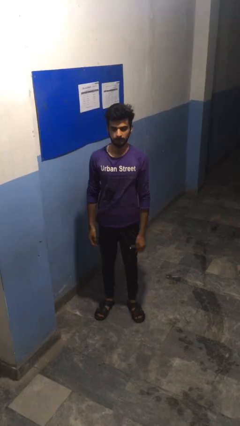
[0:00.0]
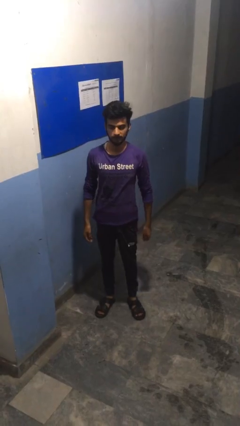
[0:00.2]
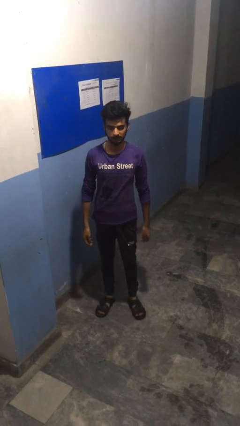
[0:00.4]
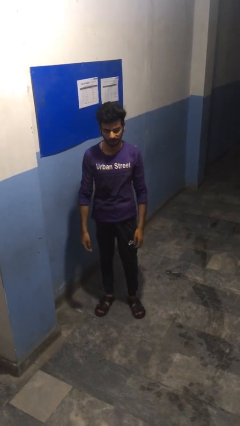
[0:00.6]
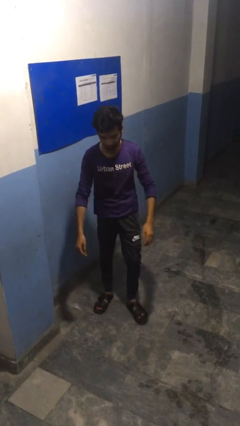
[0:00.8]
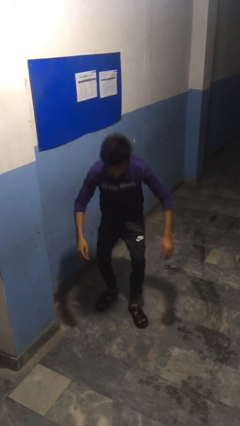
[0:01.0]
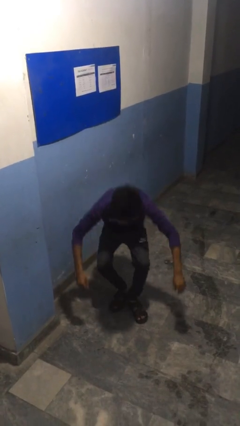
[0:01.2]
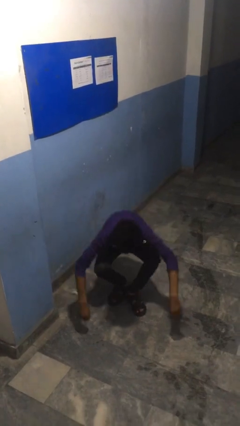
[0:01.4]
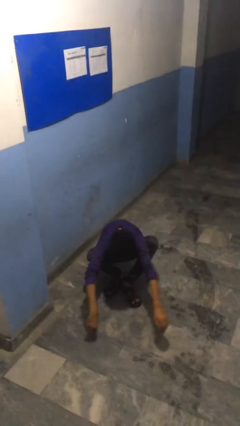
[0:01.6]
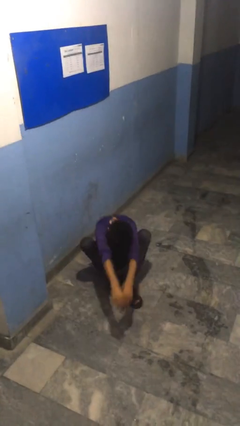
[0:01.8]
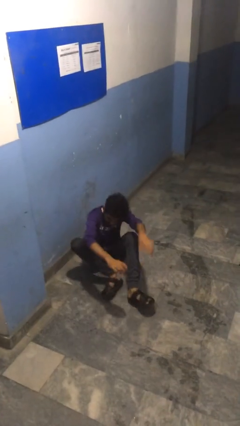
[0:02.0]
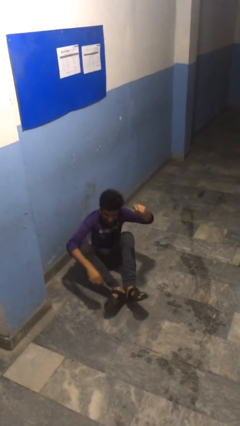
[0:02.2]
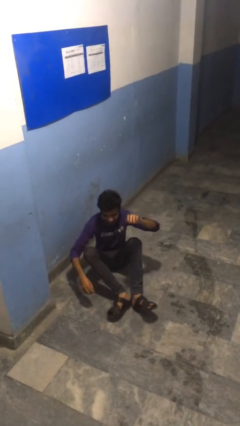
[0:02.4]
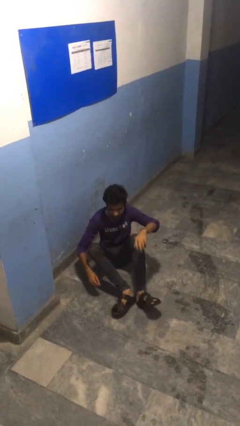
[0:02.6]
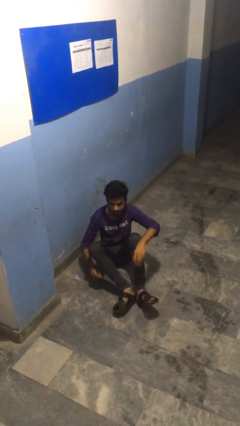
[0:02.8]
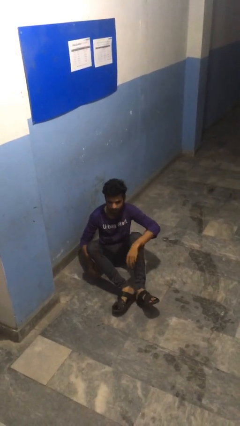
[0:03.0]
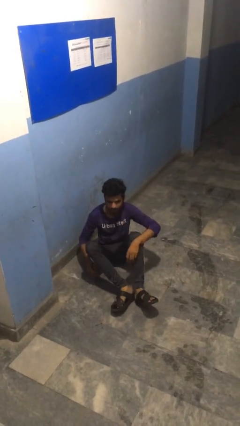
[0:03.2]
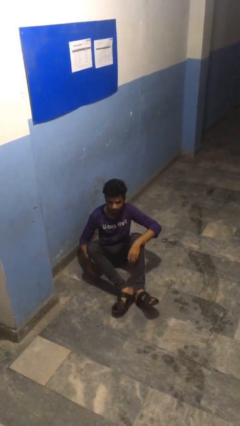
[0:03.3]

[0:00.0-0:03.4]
person falls while standing

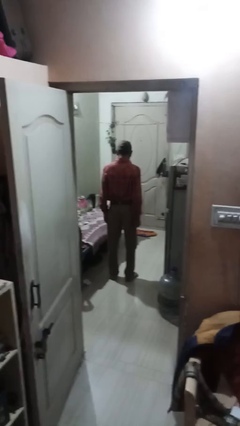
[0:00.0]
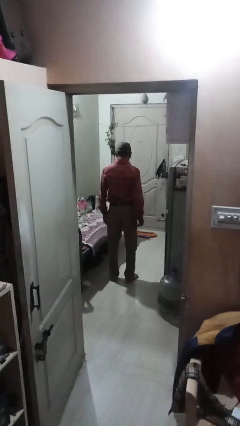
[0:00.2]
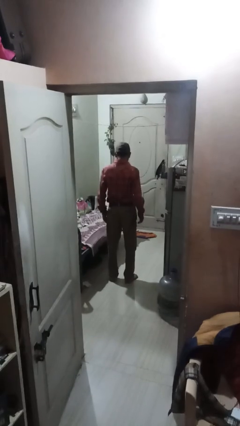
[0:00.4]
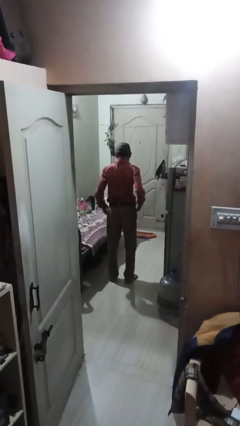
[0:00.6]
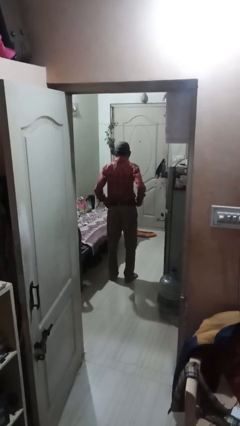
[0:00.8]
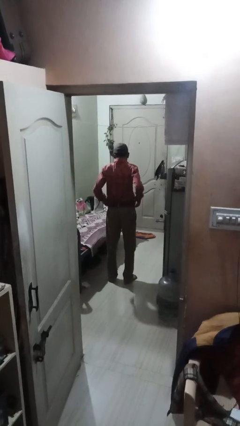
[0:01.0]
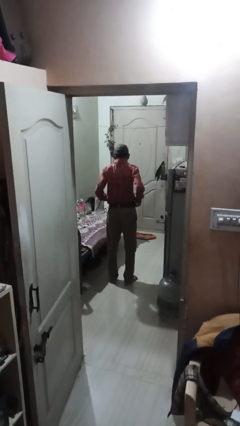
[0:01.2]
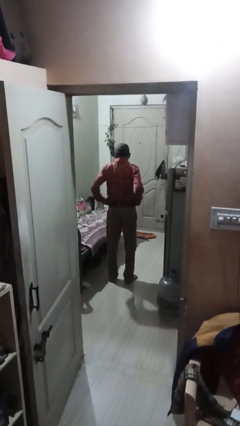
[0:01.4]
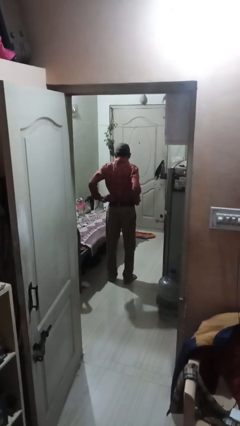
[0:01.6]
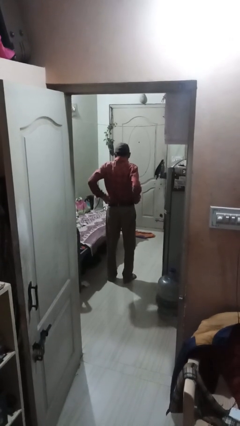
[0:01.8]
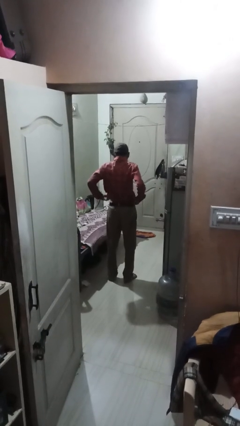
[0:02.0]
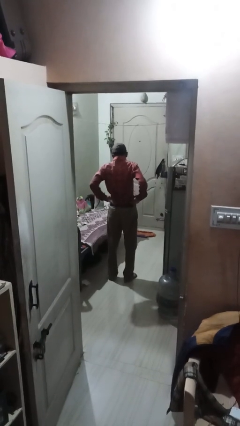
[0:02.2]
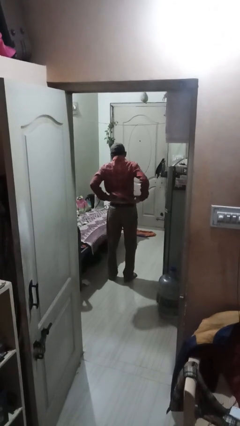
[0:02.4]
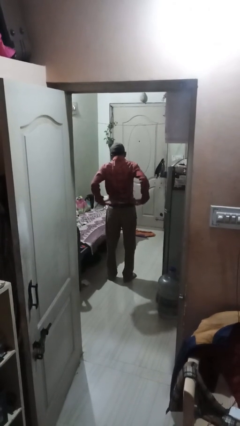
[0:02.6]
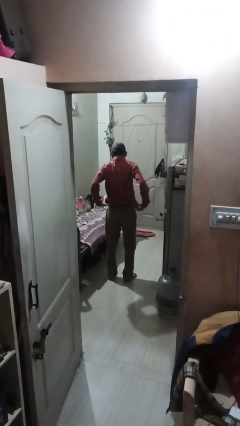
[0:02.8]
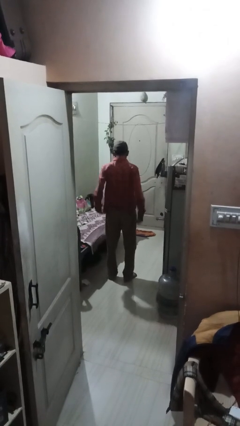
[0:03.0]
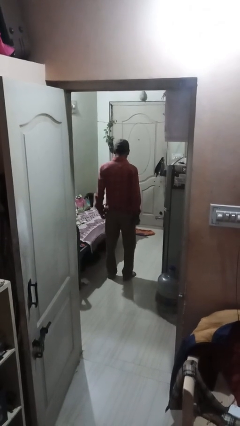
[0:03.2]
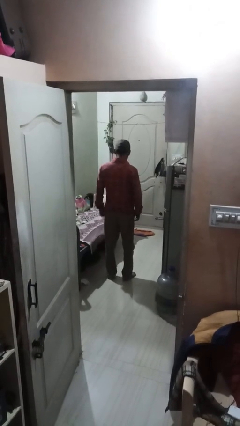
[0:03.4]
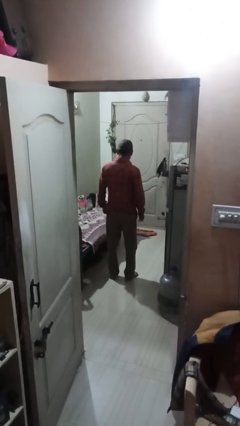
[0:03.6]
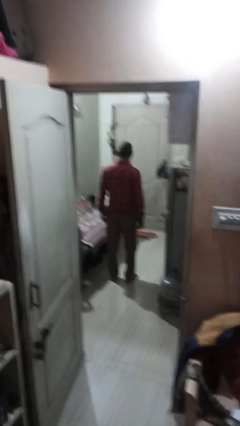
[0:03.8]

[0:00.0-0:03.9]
person untucks shirt

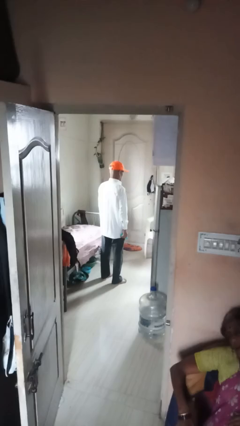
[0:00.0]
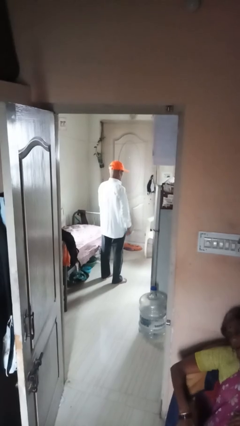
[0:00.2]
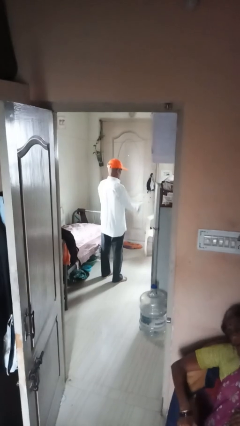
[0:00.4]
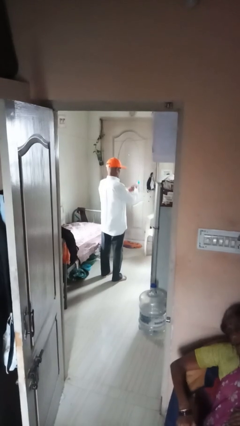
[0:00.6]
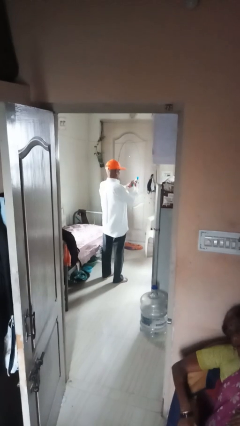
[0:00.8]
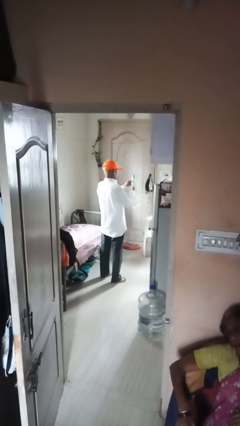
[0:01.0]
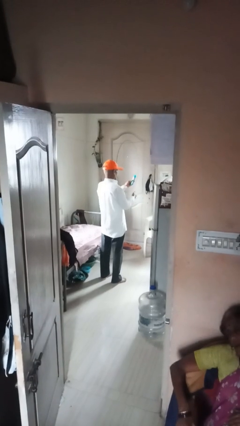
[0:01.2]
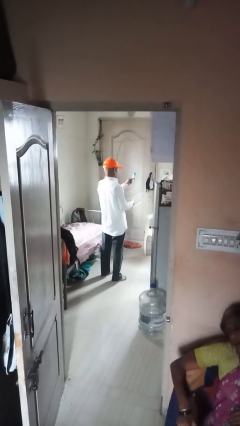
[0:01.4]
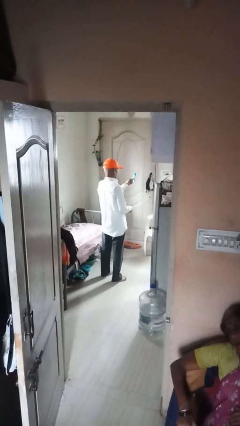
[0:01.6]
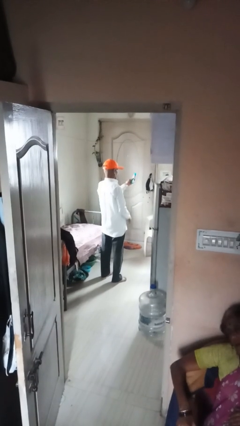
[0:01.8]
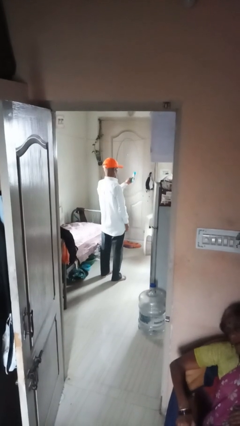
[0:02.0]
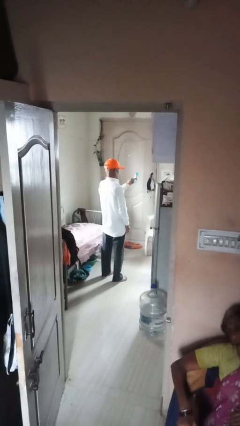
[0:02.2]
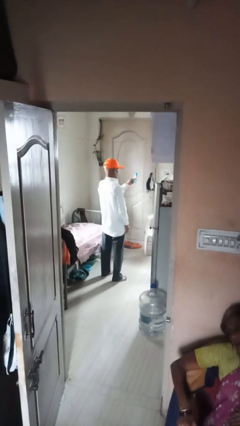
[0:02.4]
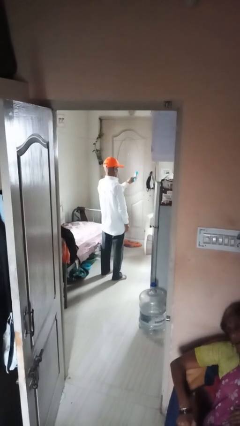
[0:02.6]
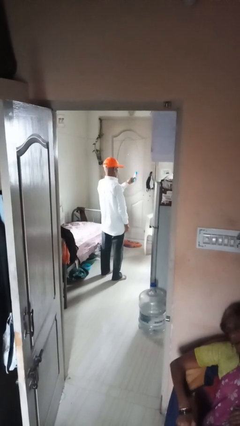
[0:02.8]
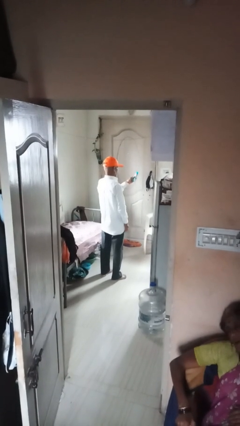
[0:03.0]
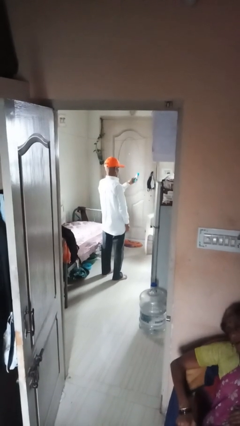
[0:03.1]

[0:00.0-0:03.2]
person squeezes object

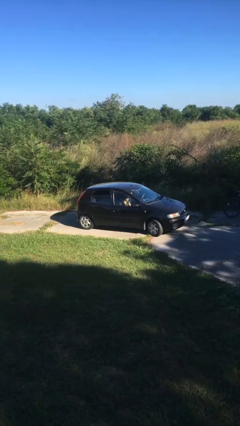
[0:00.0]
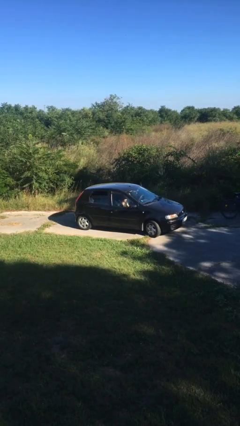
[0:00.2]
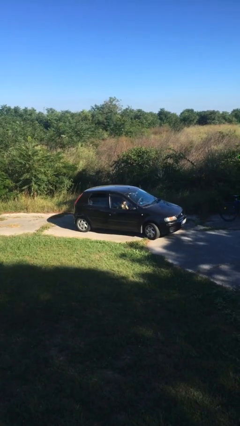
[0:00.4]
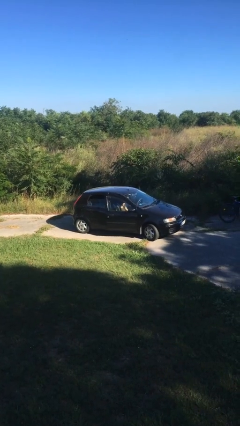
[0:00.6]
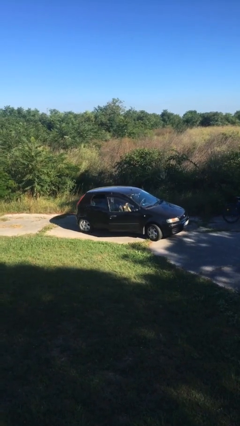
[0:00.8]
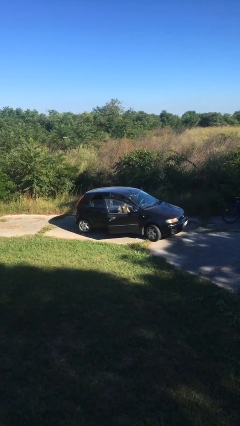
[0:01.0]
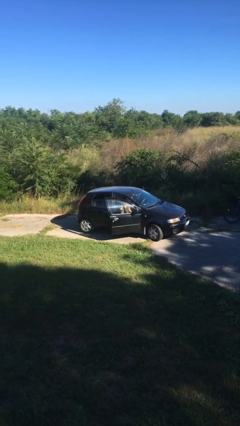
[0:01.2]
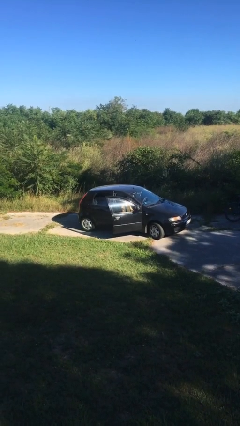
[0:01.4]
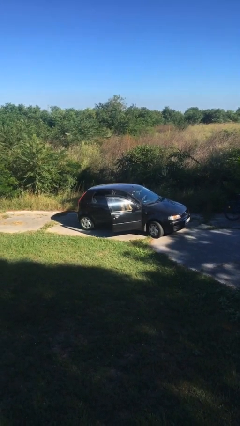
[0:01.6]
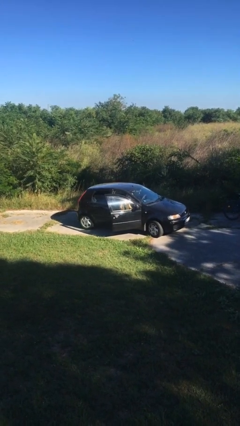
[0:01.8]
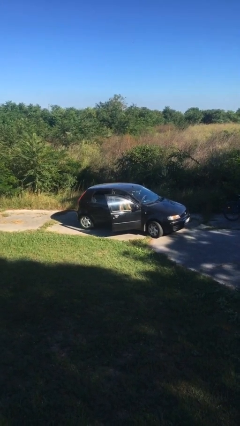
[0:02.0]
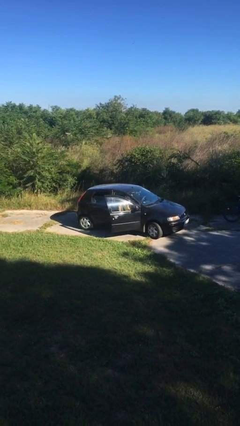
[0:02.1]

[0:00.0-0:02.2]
person opens car door

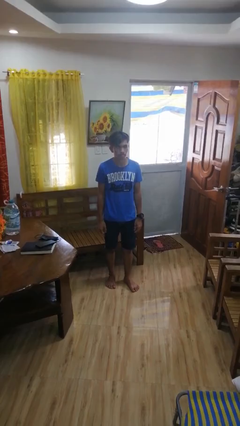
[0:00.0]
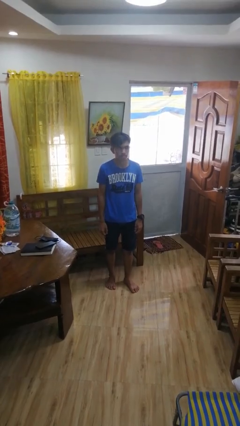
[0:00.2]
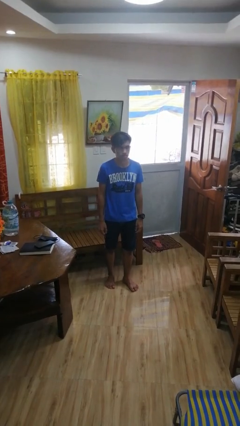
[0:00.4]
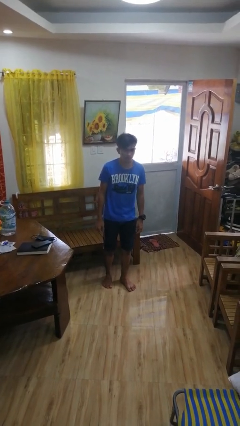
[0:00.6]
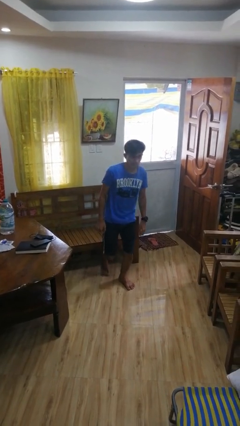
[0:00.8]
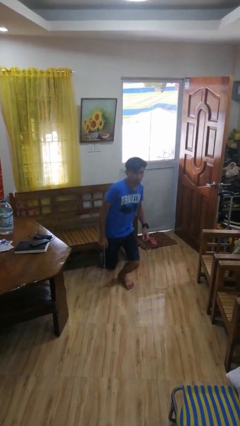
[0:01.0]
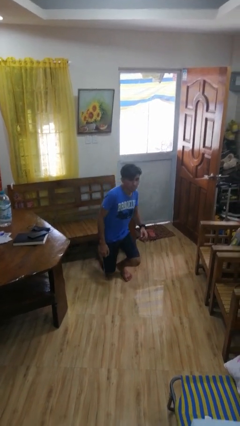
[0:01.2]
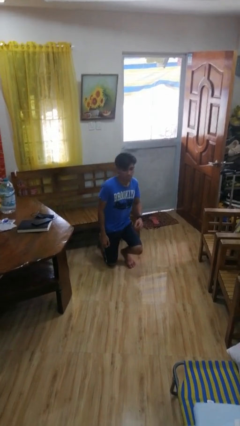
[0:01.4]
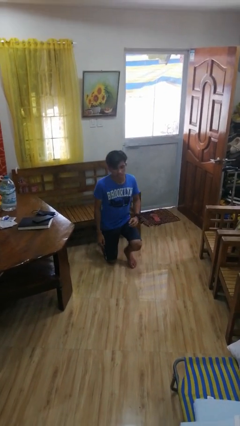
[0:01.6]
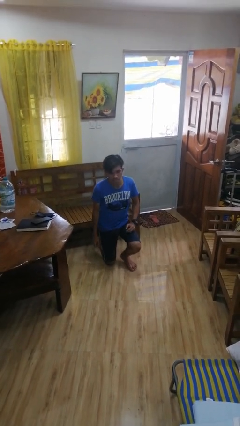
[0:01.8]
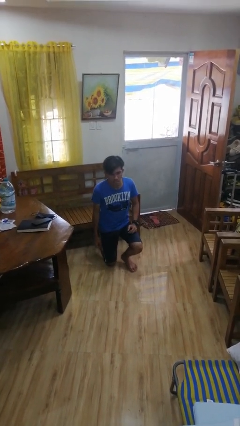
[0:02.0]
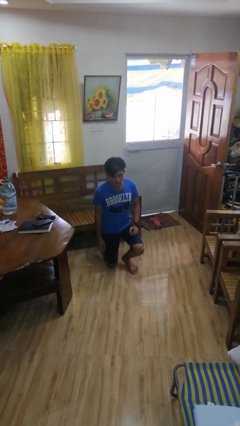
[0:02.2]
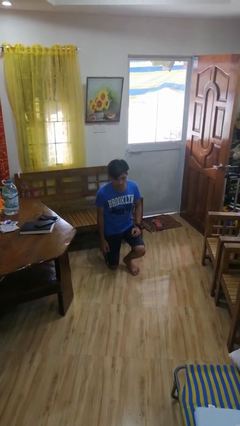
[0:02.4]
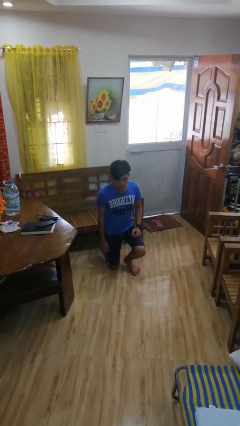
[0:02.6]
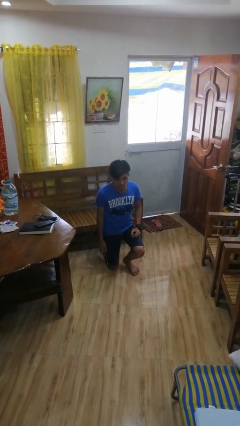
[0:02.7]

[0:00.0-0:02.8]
person kneels

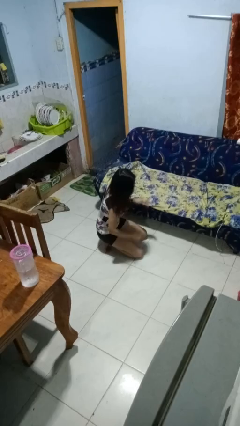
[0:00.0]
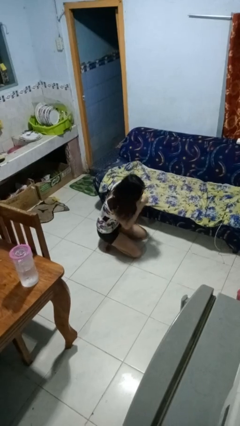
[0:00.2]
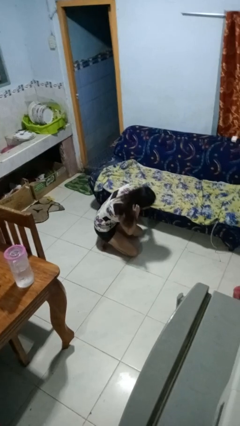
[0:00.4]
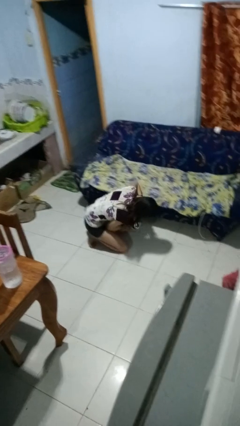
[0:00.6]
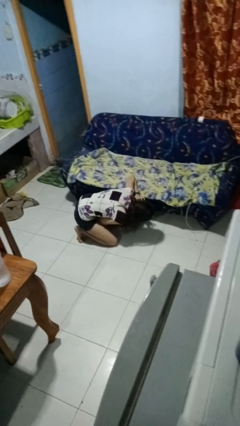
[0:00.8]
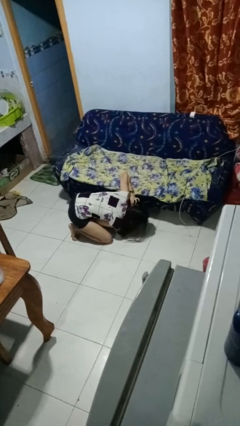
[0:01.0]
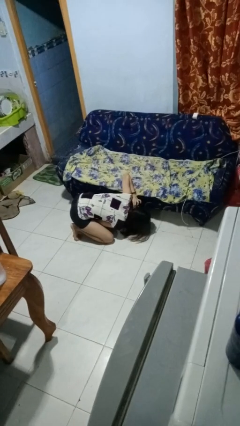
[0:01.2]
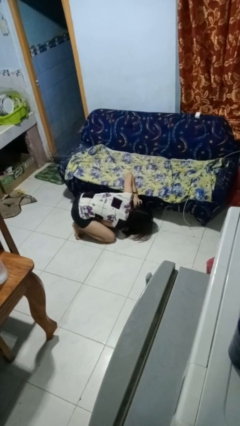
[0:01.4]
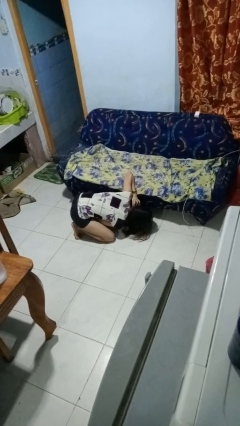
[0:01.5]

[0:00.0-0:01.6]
person searches under couch

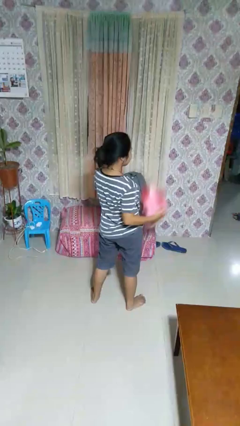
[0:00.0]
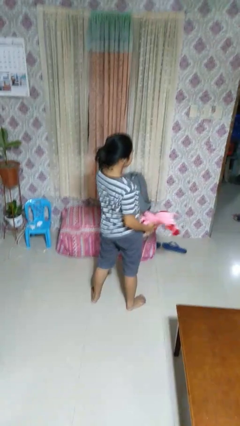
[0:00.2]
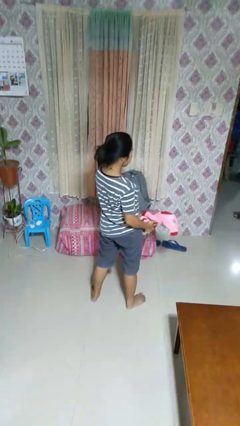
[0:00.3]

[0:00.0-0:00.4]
person catches dropped object
